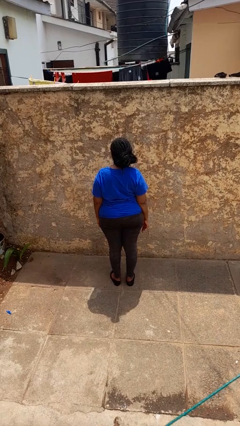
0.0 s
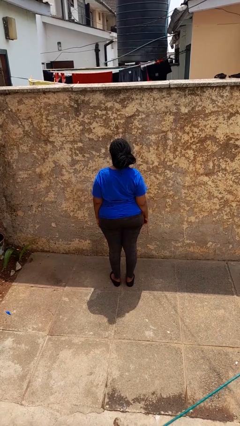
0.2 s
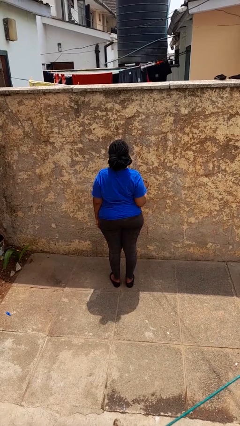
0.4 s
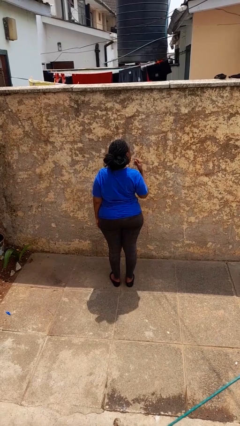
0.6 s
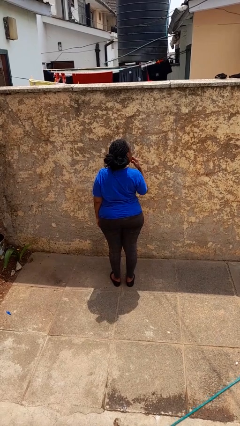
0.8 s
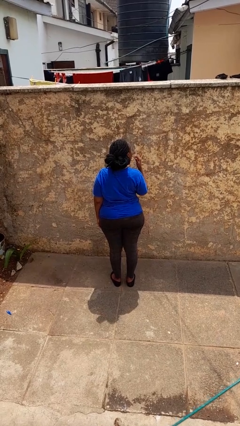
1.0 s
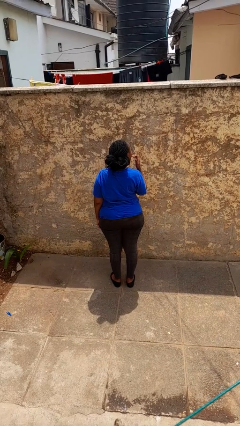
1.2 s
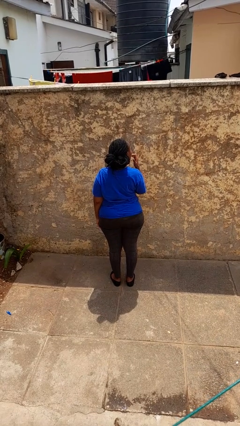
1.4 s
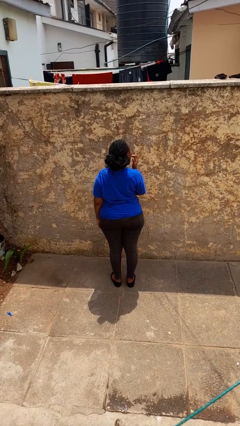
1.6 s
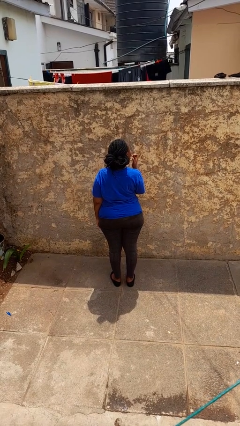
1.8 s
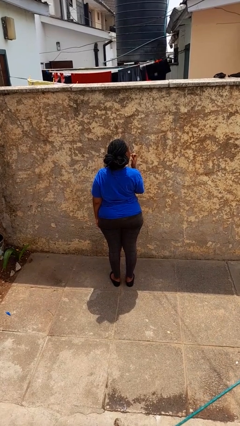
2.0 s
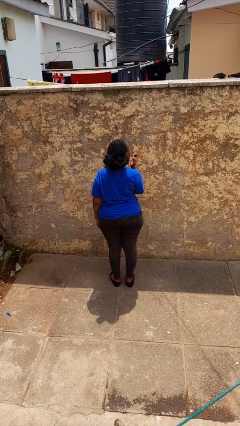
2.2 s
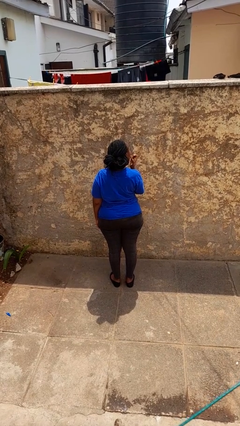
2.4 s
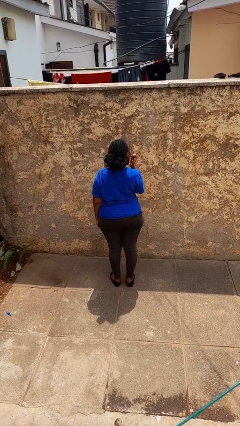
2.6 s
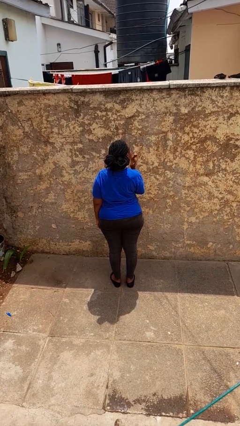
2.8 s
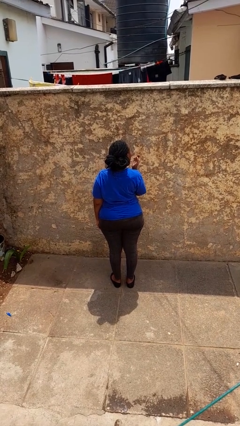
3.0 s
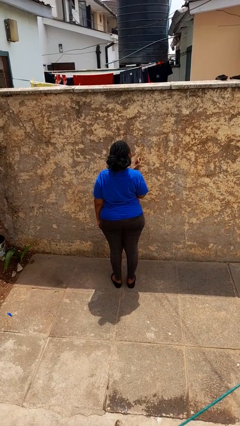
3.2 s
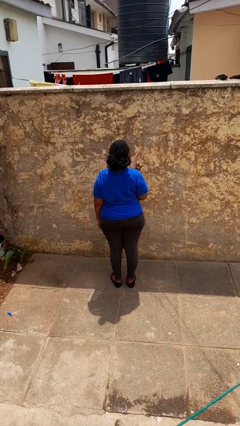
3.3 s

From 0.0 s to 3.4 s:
person licks fingers

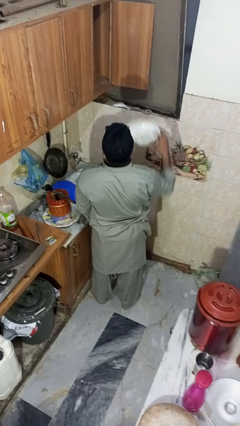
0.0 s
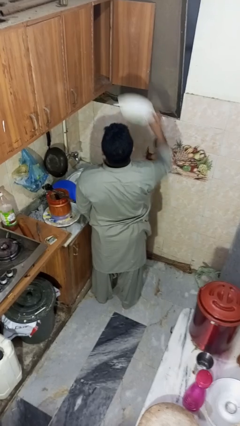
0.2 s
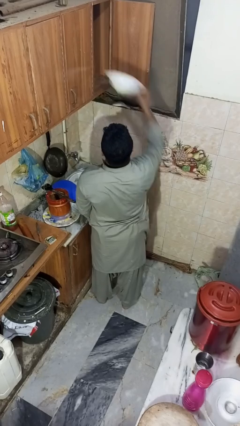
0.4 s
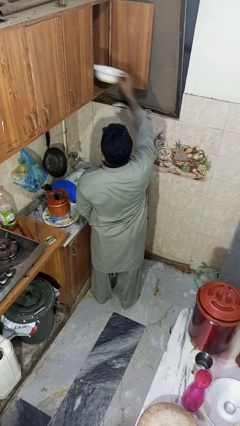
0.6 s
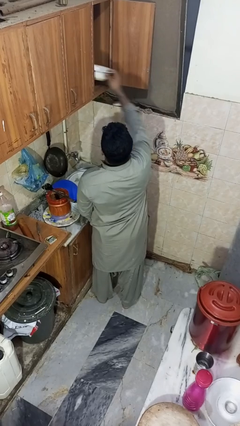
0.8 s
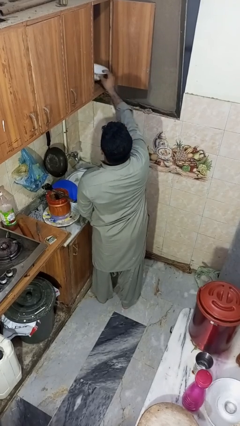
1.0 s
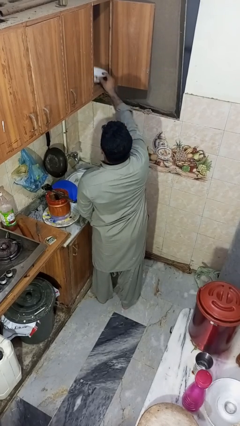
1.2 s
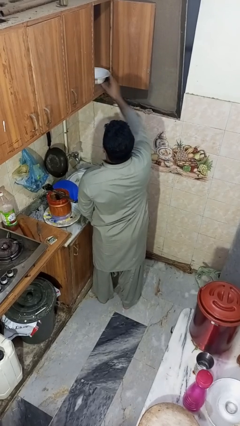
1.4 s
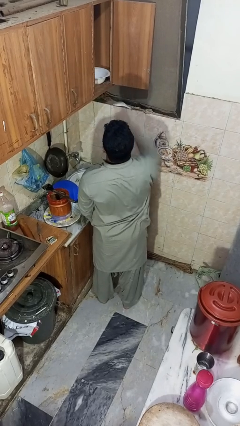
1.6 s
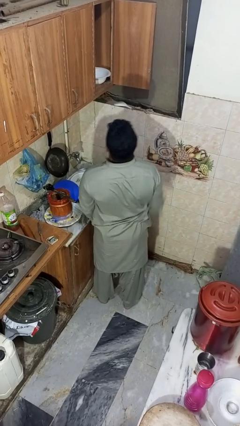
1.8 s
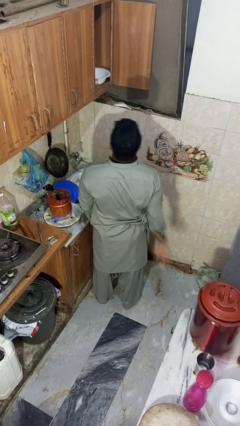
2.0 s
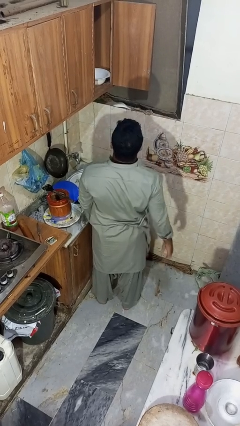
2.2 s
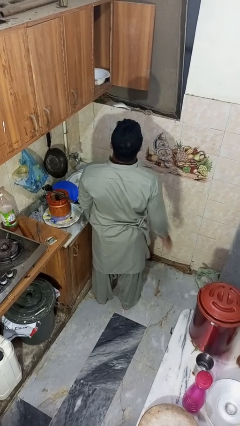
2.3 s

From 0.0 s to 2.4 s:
person puts object in cabinet

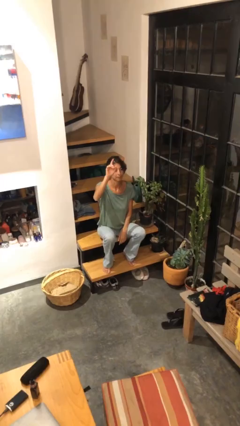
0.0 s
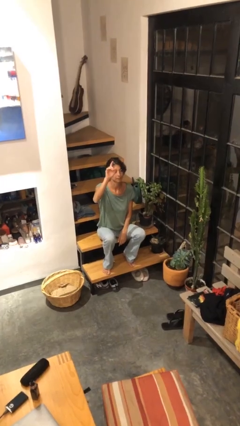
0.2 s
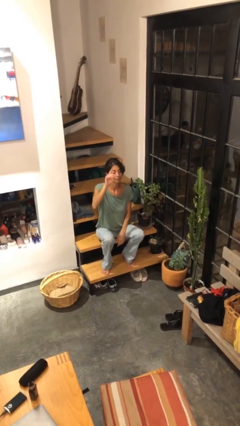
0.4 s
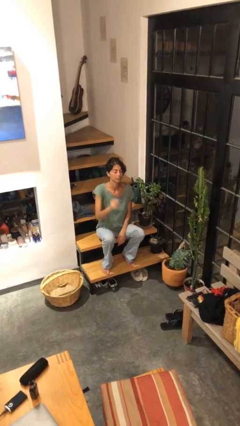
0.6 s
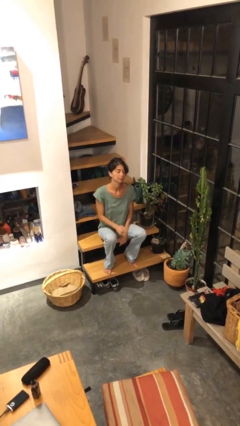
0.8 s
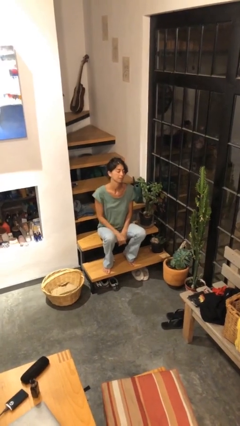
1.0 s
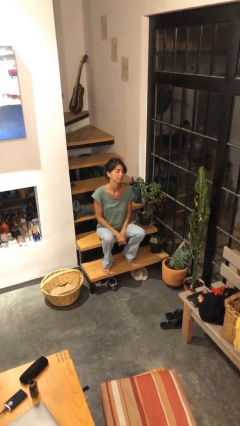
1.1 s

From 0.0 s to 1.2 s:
person gestures lower hand

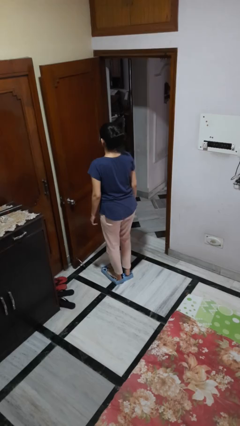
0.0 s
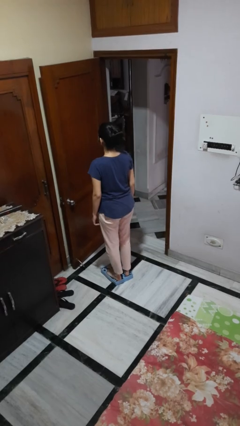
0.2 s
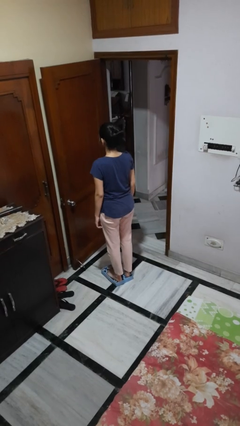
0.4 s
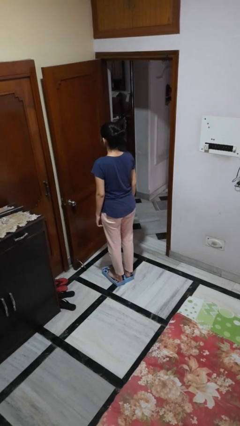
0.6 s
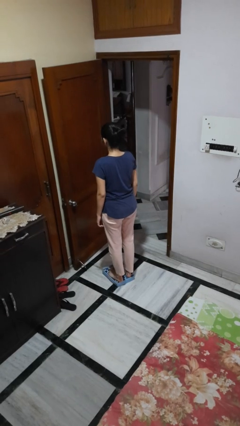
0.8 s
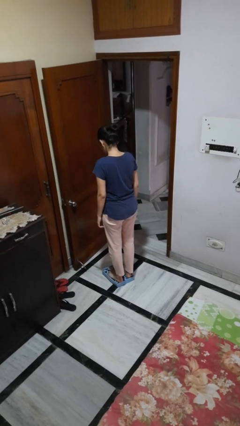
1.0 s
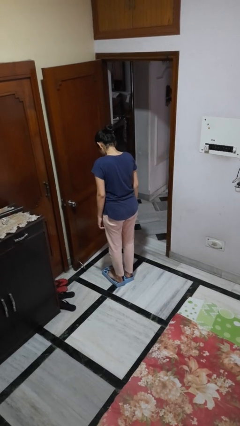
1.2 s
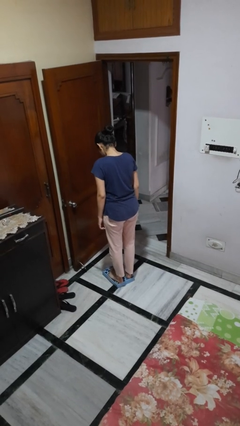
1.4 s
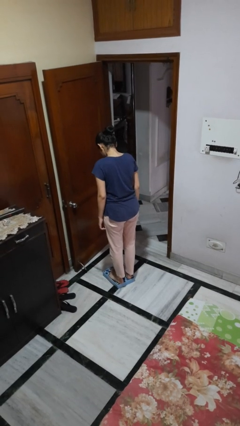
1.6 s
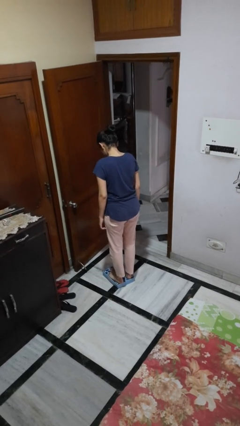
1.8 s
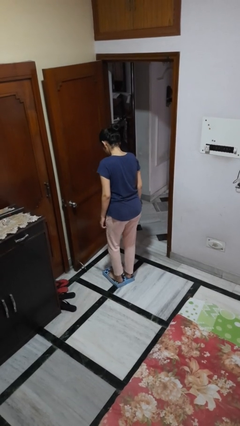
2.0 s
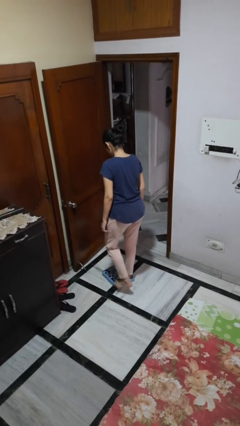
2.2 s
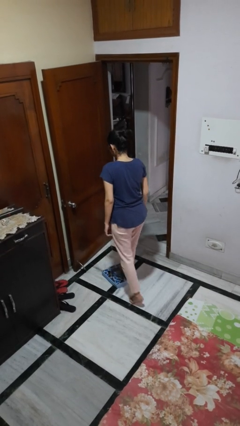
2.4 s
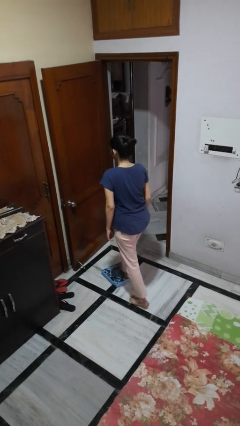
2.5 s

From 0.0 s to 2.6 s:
person uses bodyweight scale

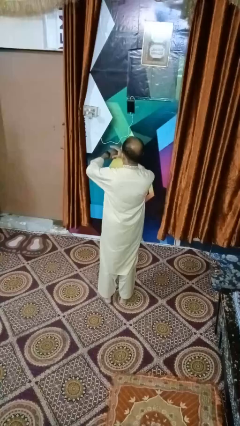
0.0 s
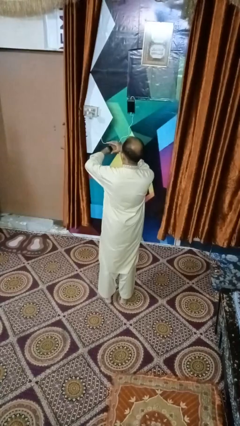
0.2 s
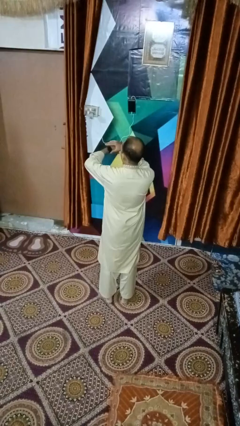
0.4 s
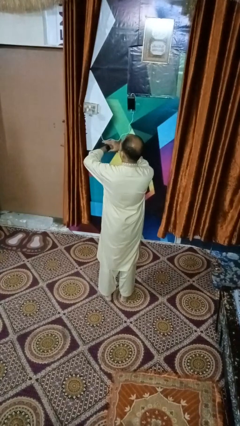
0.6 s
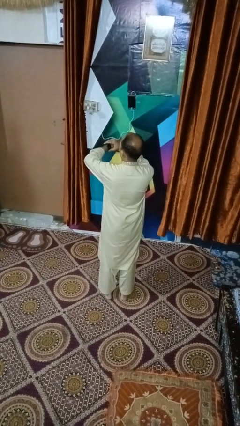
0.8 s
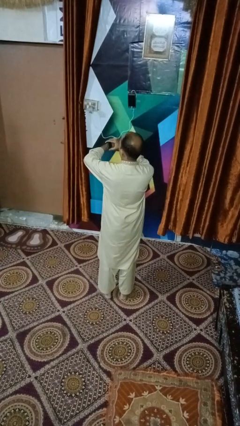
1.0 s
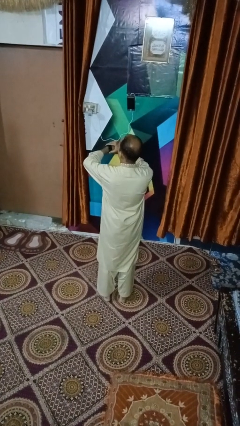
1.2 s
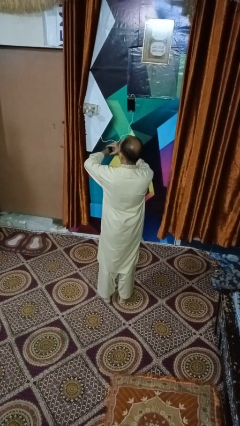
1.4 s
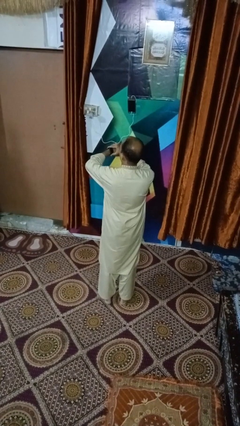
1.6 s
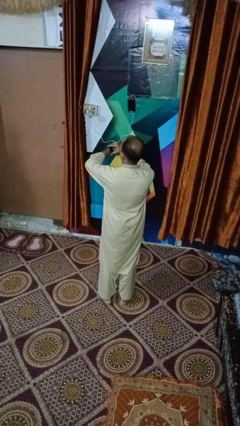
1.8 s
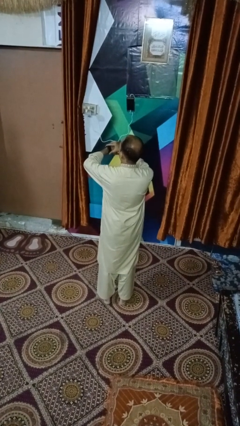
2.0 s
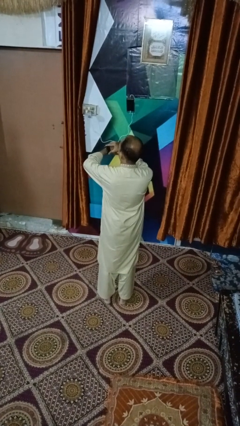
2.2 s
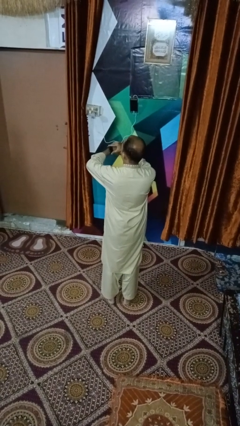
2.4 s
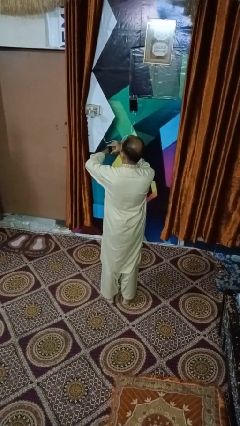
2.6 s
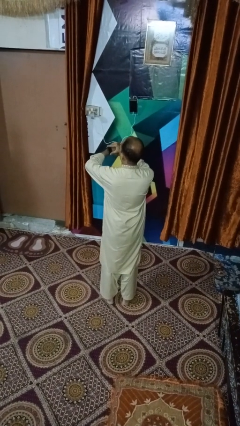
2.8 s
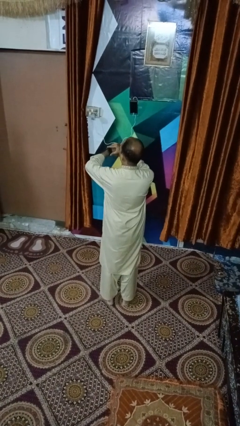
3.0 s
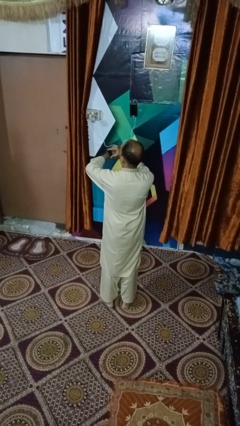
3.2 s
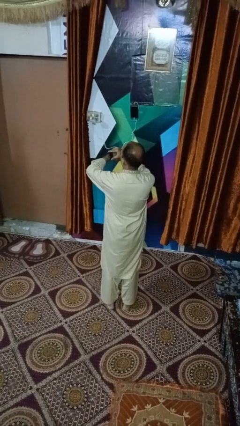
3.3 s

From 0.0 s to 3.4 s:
person looks at wristwatch

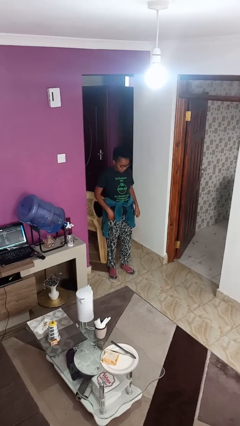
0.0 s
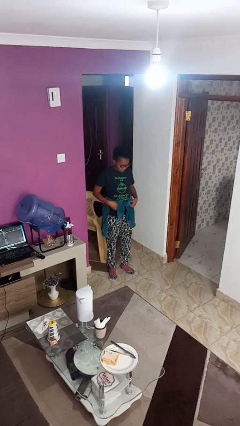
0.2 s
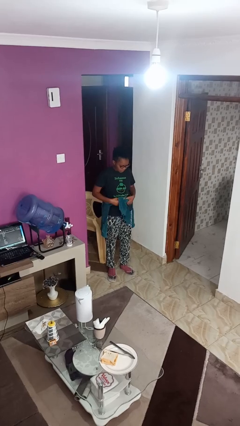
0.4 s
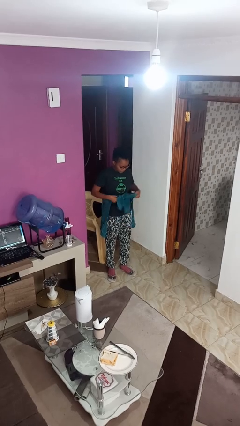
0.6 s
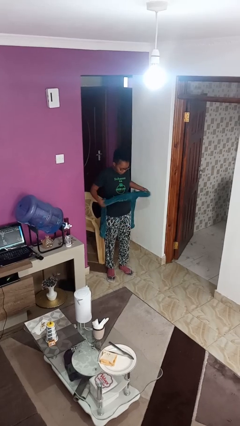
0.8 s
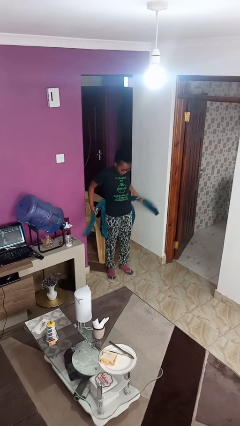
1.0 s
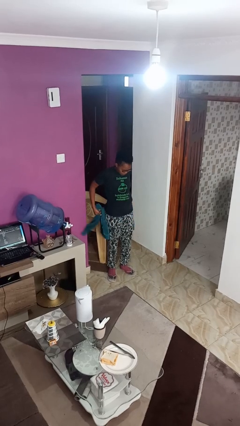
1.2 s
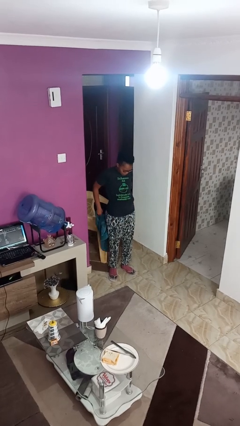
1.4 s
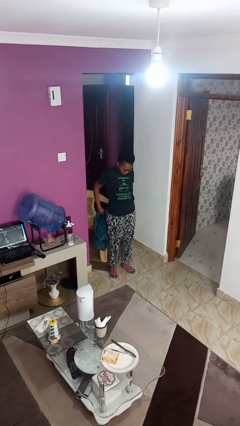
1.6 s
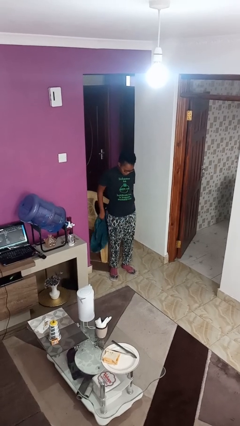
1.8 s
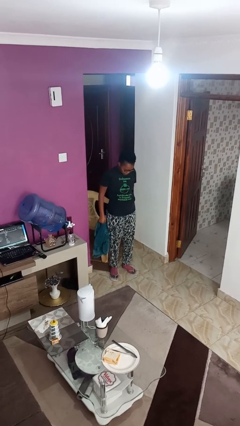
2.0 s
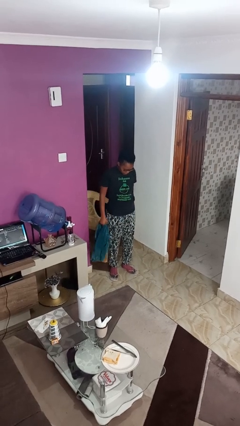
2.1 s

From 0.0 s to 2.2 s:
person unties jacket around waist

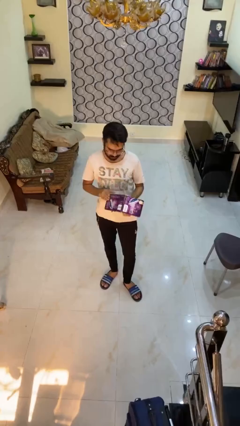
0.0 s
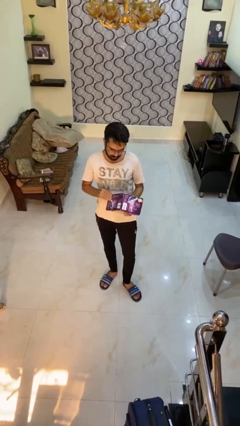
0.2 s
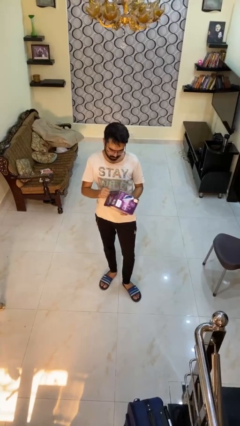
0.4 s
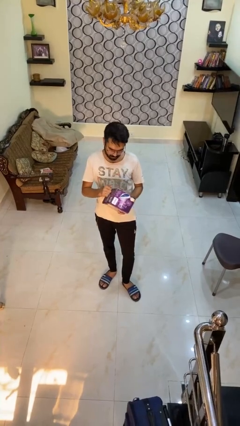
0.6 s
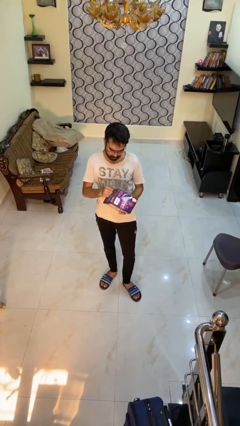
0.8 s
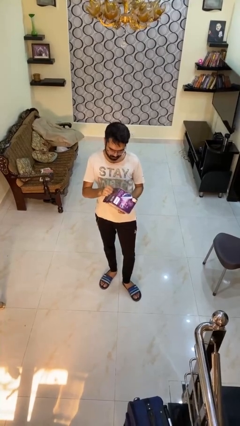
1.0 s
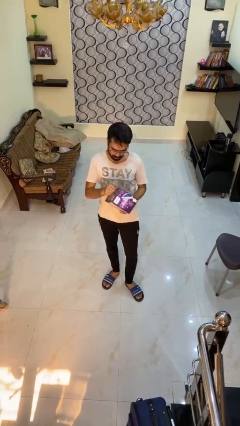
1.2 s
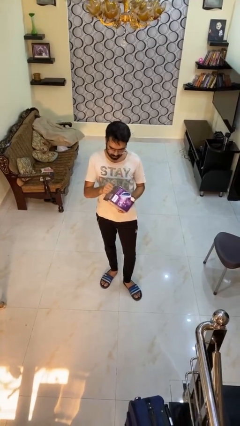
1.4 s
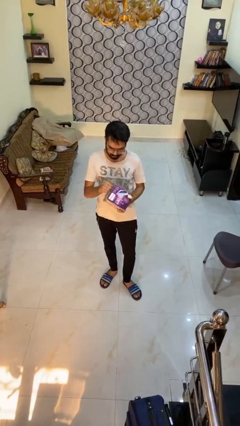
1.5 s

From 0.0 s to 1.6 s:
person taps object with finger

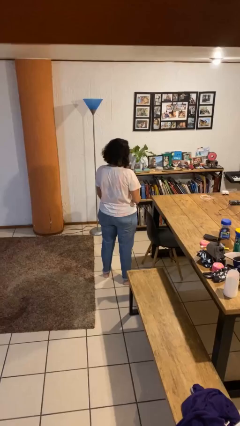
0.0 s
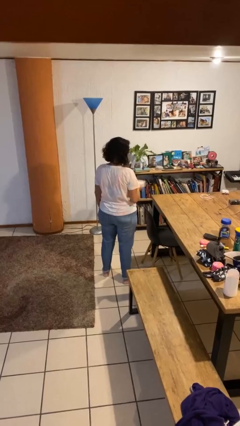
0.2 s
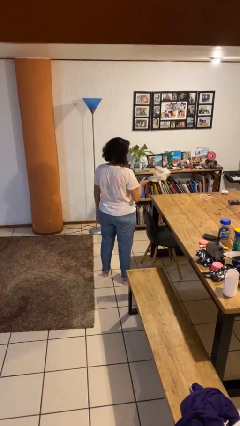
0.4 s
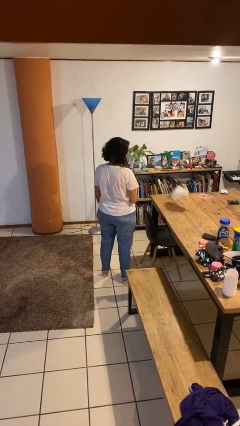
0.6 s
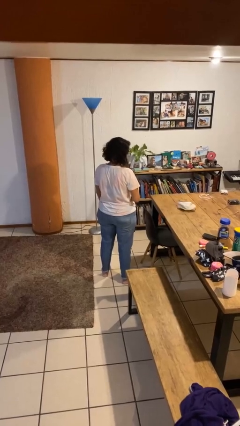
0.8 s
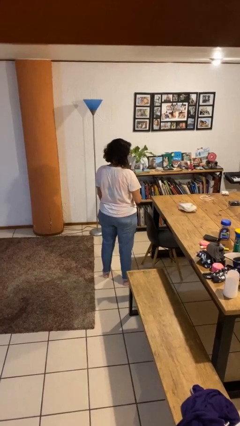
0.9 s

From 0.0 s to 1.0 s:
person throws object on table
